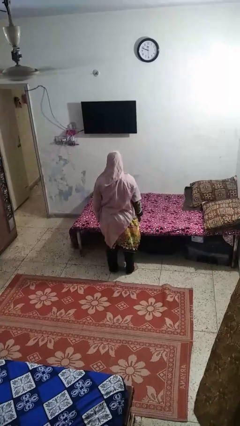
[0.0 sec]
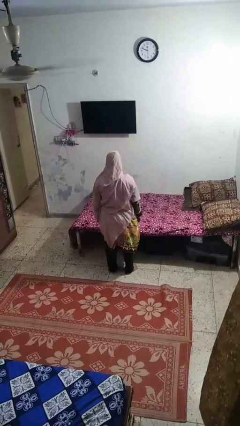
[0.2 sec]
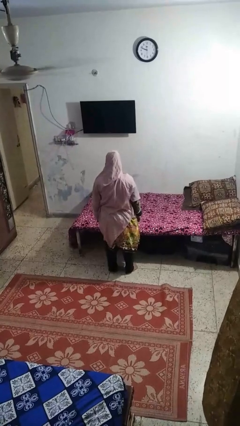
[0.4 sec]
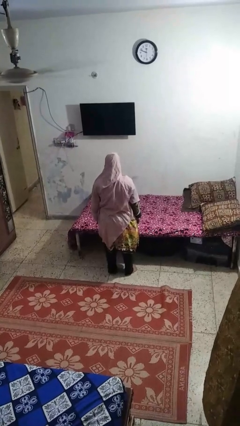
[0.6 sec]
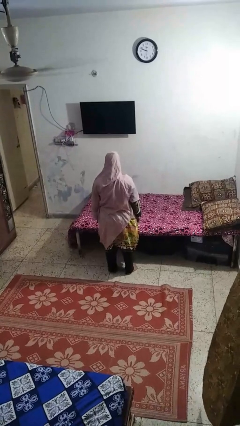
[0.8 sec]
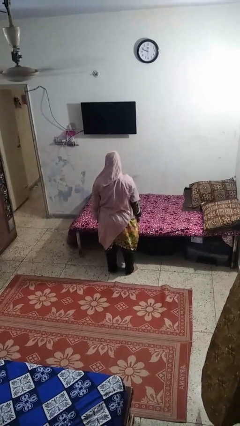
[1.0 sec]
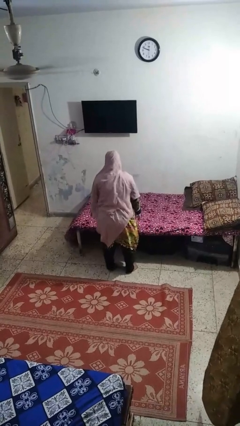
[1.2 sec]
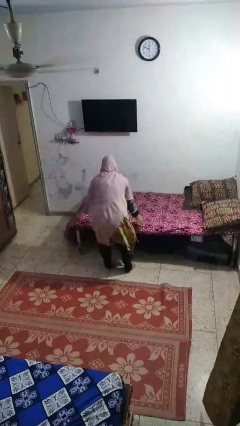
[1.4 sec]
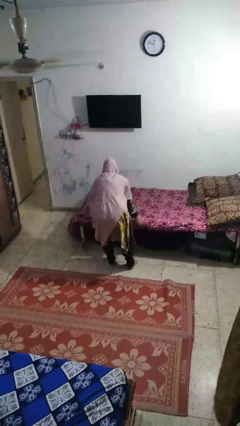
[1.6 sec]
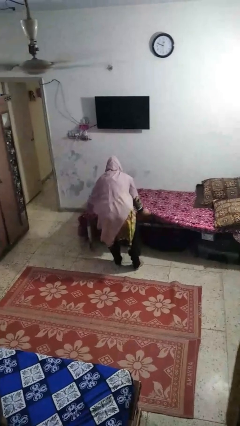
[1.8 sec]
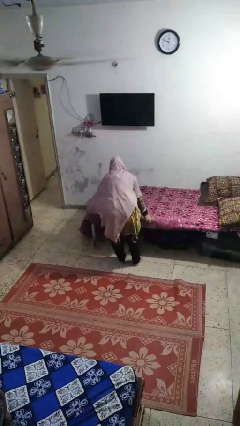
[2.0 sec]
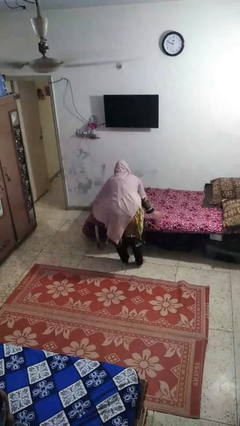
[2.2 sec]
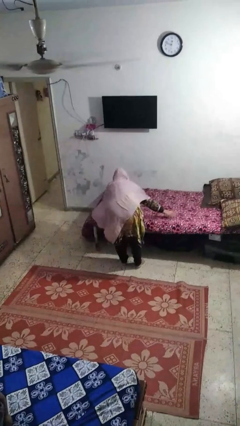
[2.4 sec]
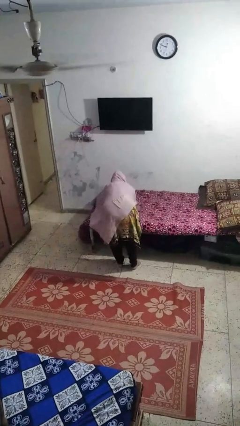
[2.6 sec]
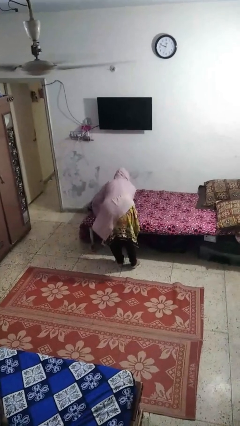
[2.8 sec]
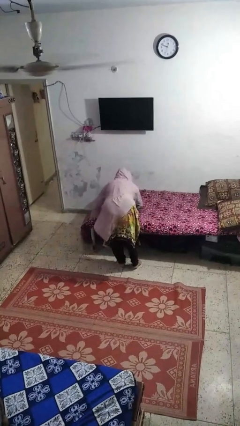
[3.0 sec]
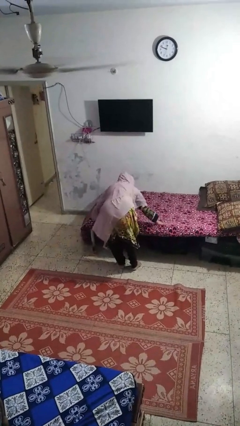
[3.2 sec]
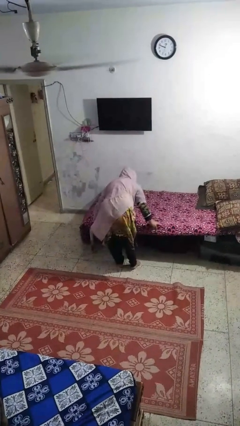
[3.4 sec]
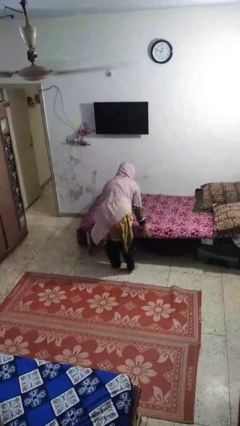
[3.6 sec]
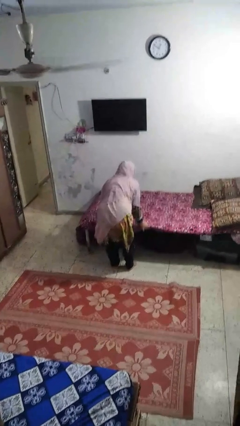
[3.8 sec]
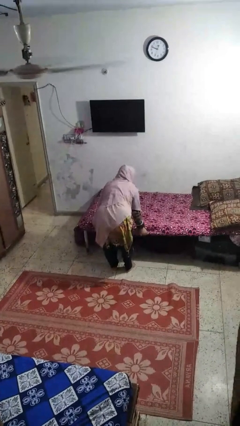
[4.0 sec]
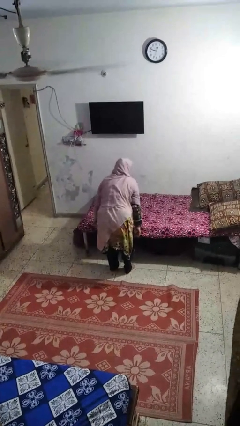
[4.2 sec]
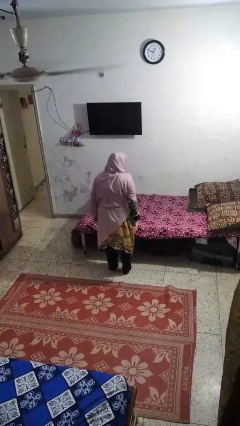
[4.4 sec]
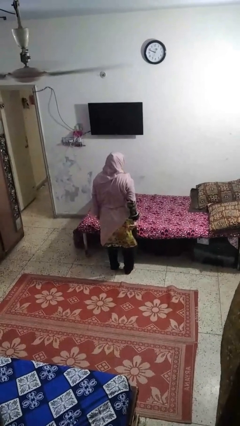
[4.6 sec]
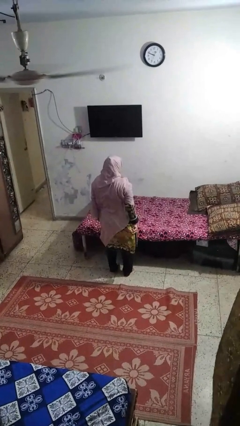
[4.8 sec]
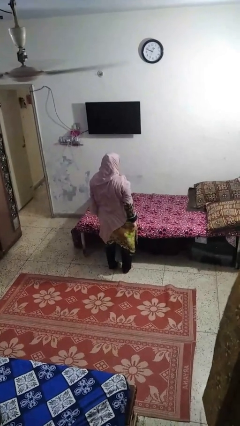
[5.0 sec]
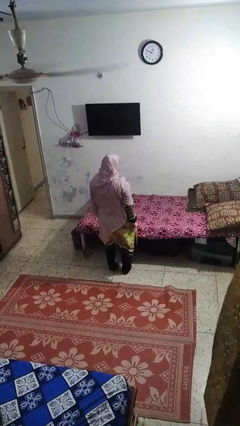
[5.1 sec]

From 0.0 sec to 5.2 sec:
person makes bed

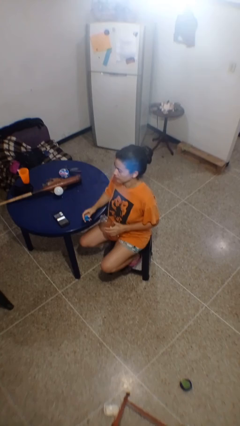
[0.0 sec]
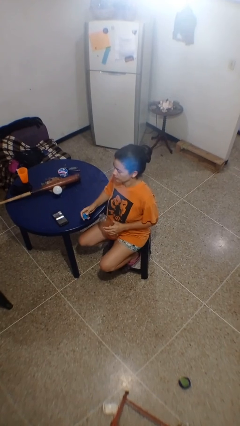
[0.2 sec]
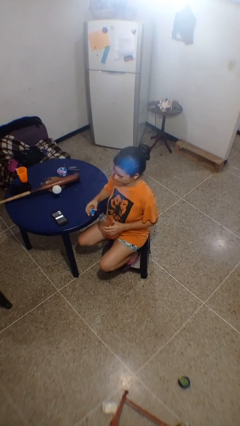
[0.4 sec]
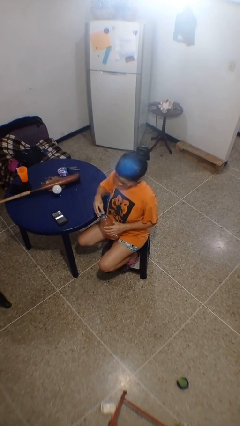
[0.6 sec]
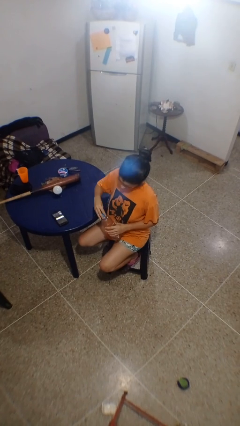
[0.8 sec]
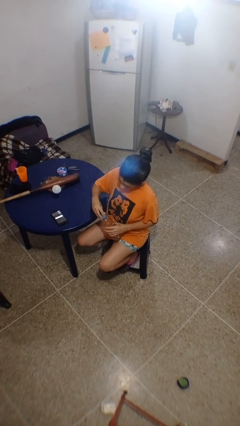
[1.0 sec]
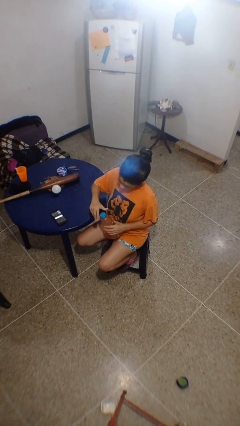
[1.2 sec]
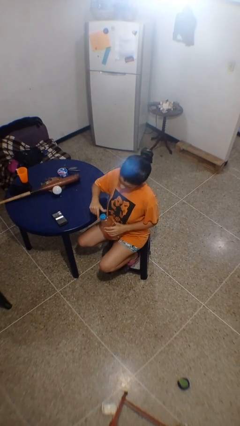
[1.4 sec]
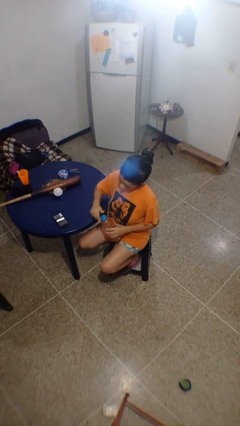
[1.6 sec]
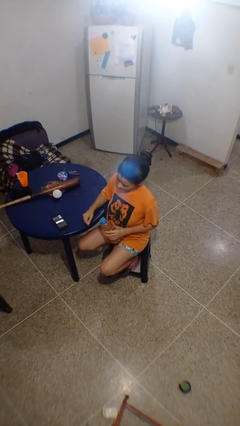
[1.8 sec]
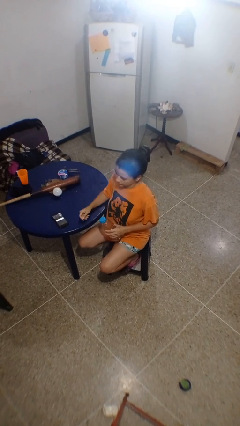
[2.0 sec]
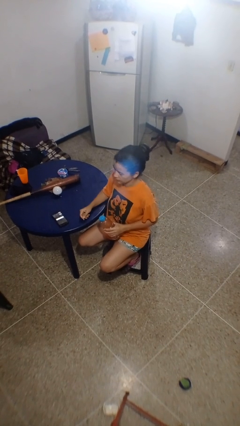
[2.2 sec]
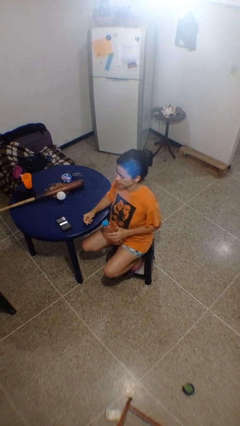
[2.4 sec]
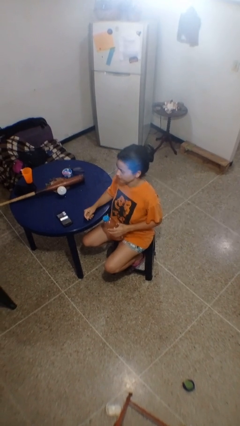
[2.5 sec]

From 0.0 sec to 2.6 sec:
person screws lid to bottle

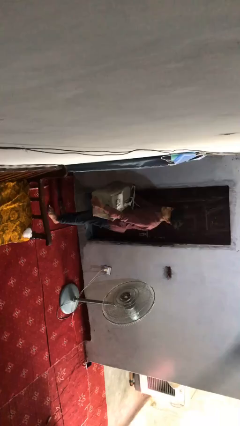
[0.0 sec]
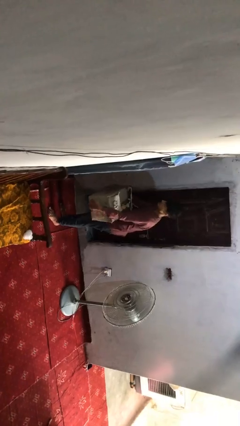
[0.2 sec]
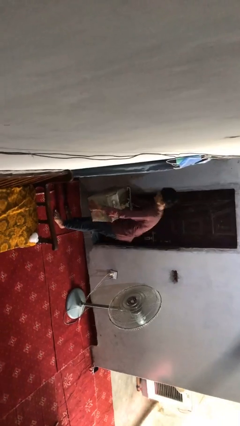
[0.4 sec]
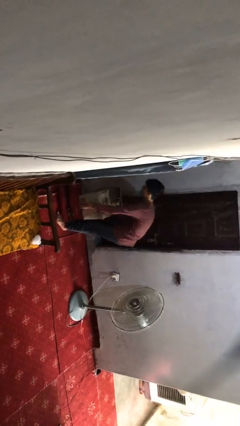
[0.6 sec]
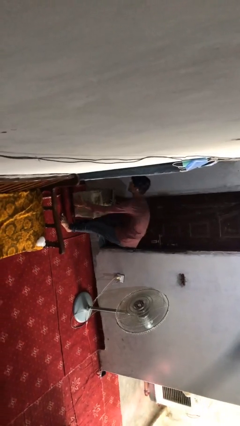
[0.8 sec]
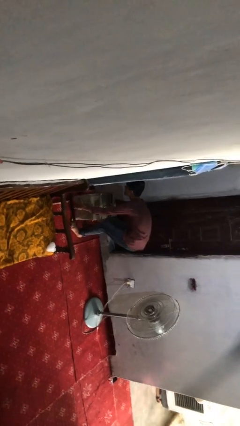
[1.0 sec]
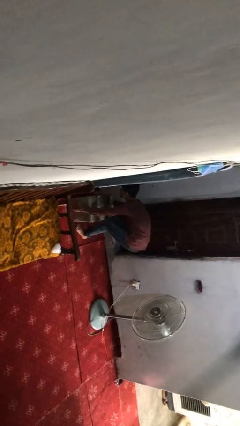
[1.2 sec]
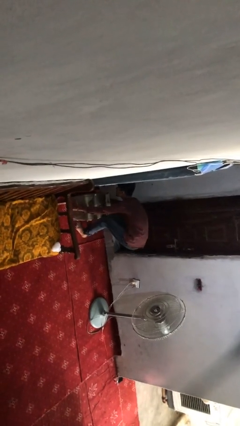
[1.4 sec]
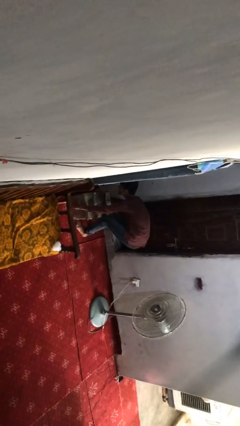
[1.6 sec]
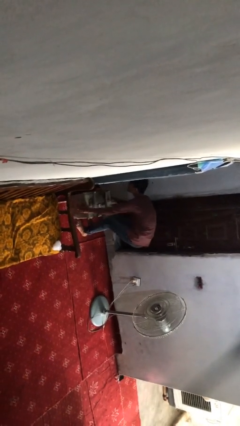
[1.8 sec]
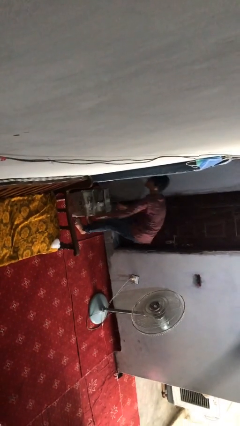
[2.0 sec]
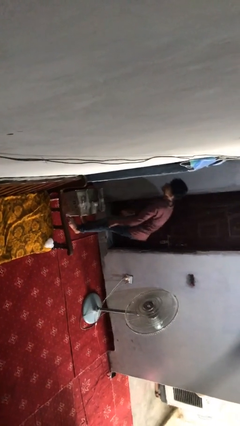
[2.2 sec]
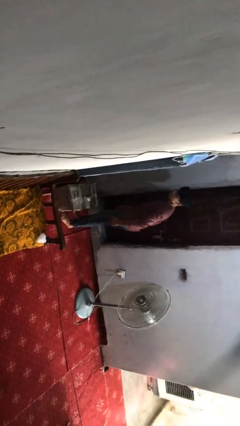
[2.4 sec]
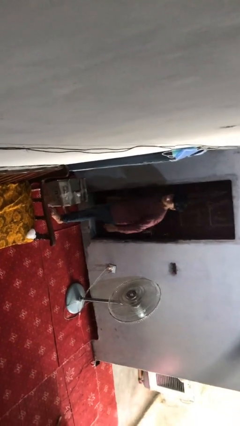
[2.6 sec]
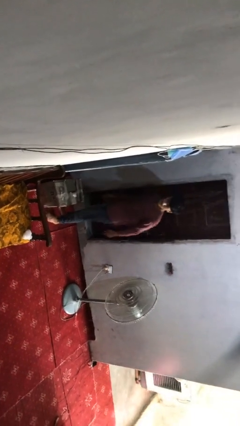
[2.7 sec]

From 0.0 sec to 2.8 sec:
person puts down object on floor

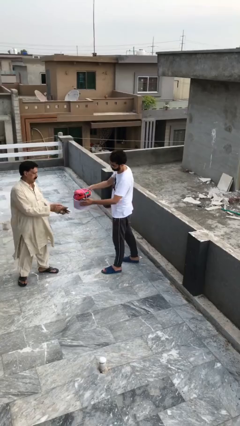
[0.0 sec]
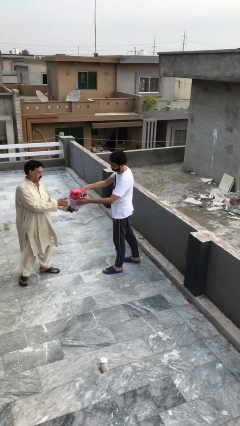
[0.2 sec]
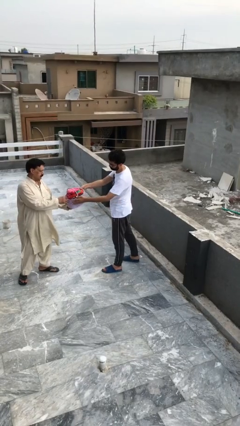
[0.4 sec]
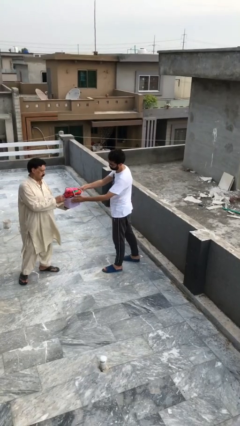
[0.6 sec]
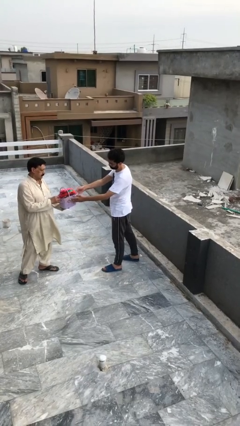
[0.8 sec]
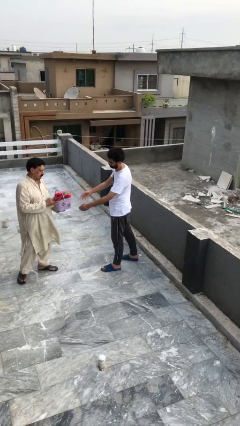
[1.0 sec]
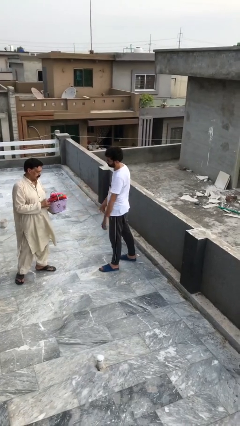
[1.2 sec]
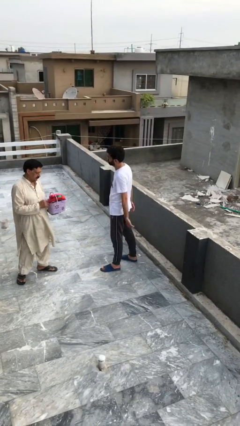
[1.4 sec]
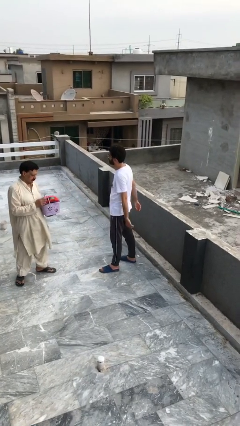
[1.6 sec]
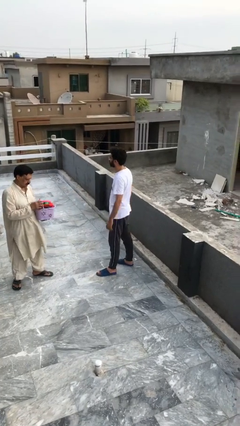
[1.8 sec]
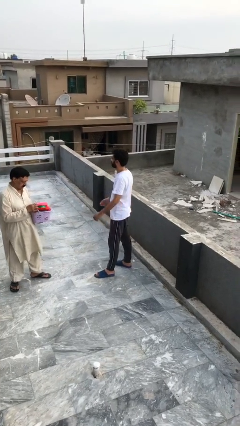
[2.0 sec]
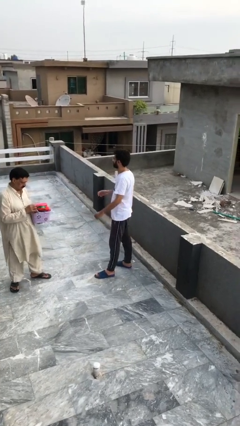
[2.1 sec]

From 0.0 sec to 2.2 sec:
person transfers object to person

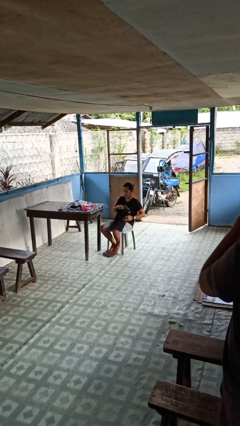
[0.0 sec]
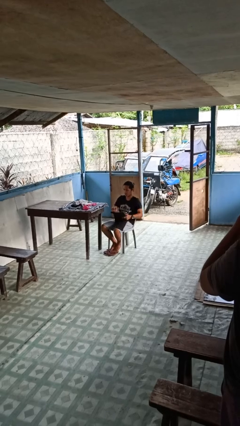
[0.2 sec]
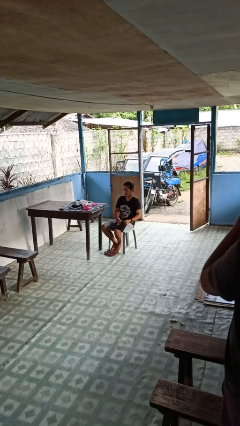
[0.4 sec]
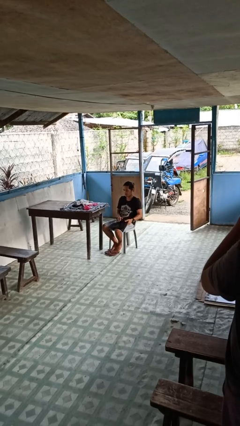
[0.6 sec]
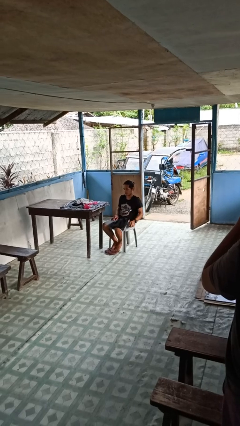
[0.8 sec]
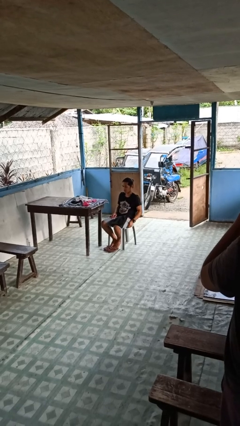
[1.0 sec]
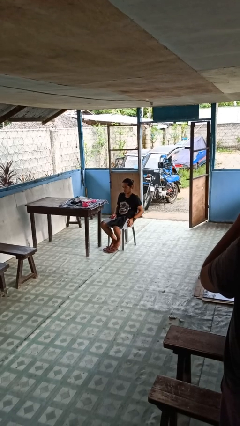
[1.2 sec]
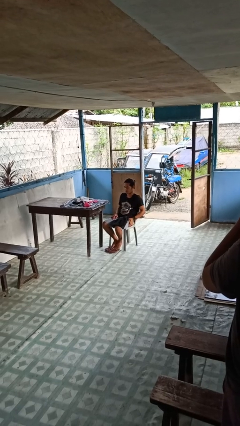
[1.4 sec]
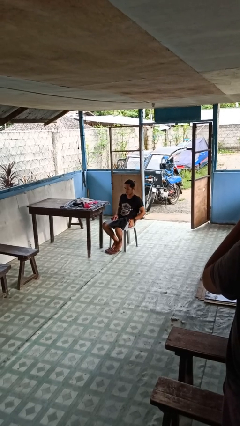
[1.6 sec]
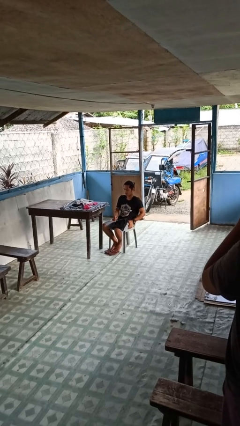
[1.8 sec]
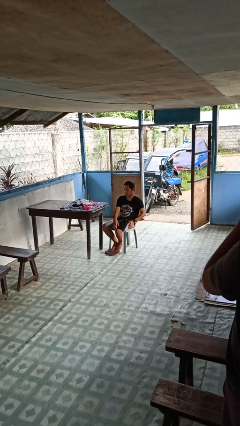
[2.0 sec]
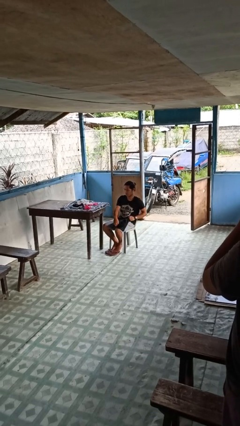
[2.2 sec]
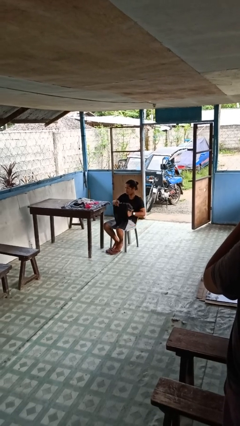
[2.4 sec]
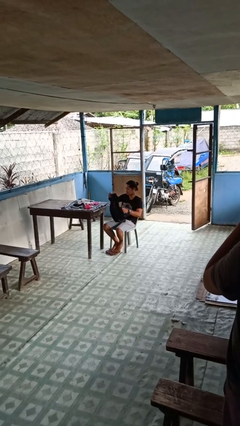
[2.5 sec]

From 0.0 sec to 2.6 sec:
person folds pants

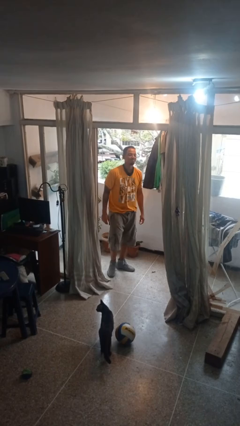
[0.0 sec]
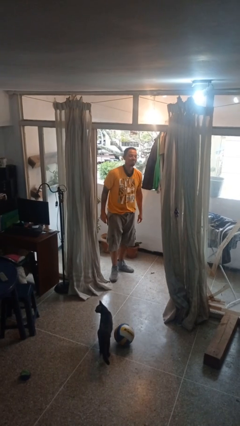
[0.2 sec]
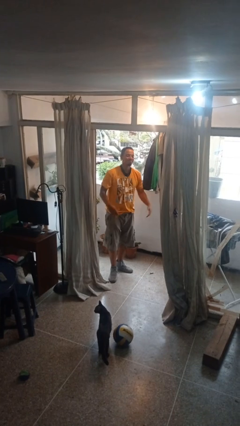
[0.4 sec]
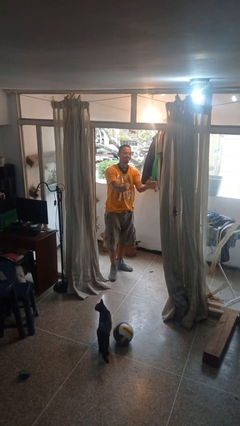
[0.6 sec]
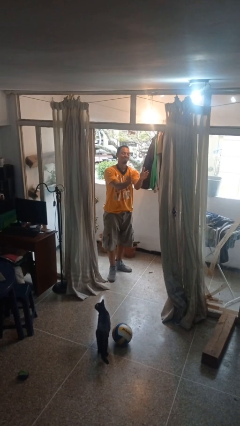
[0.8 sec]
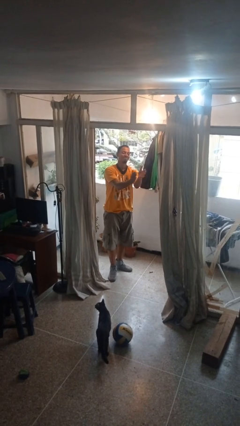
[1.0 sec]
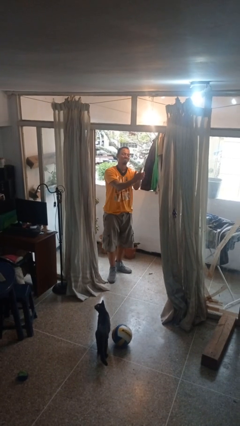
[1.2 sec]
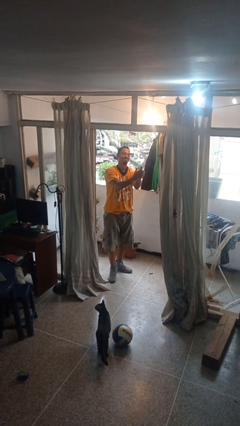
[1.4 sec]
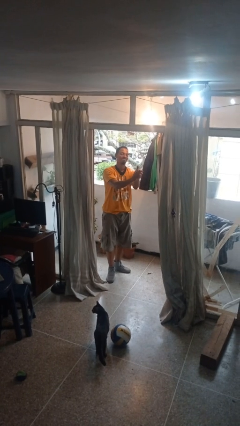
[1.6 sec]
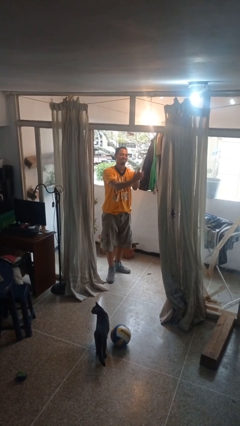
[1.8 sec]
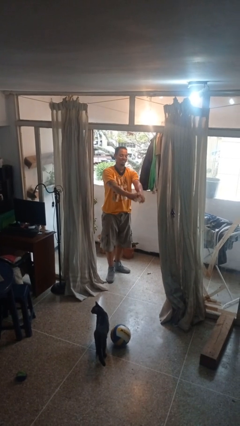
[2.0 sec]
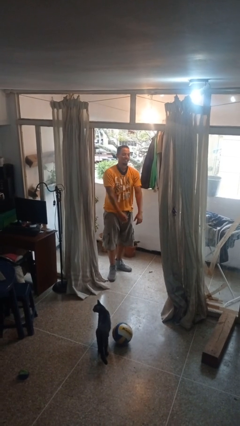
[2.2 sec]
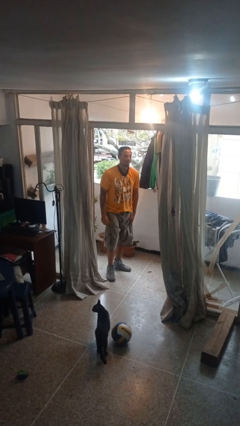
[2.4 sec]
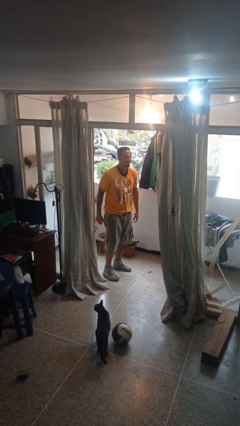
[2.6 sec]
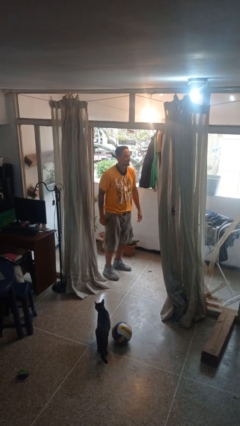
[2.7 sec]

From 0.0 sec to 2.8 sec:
person claps hands
